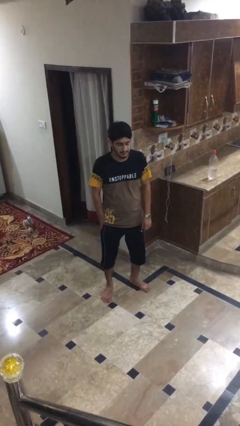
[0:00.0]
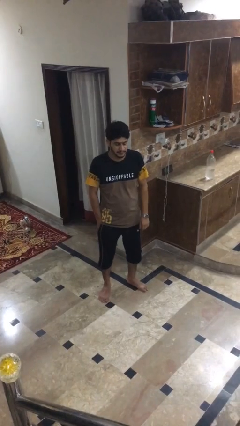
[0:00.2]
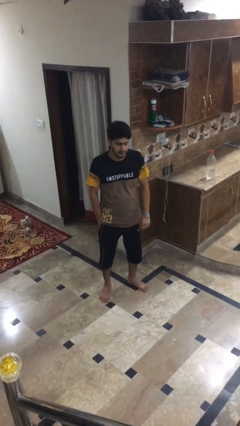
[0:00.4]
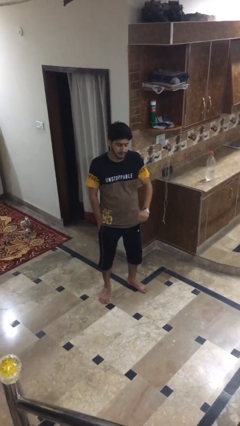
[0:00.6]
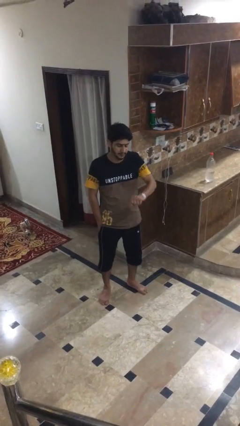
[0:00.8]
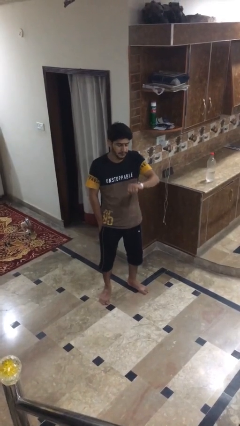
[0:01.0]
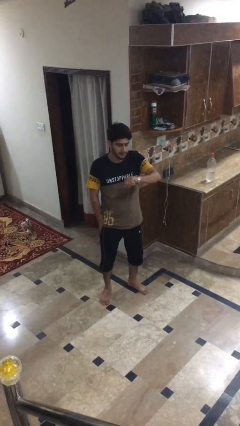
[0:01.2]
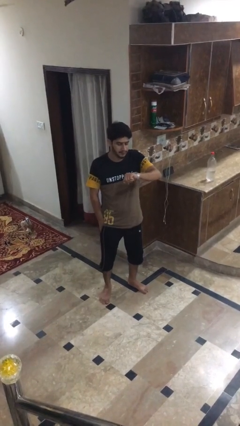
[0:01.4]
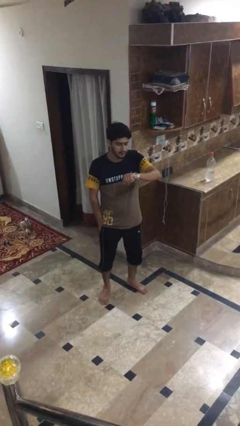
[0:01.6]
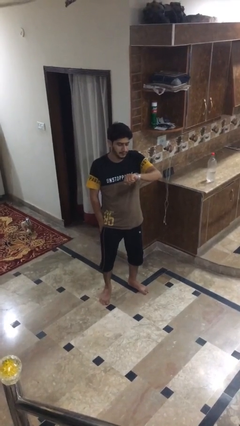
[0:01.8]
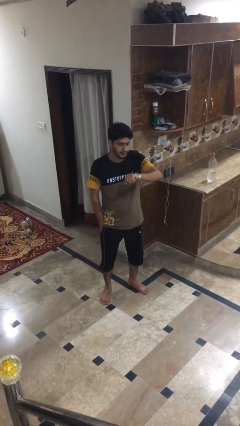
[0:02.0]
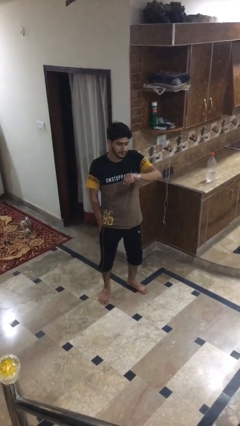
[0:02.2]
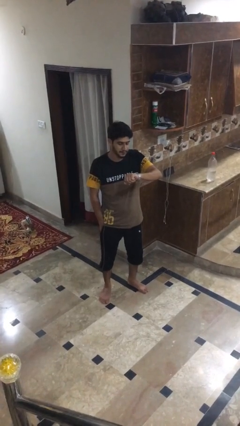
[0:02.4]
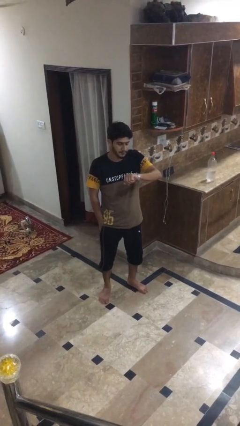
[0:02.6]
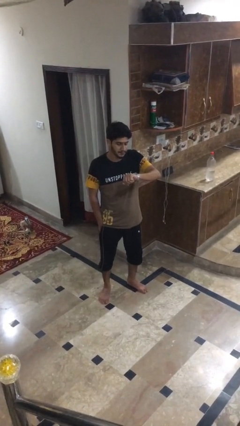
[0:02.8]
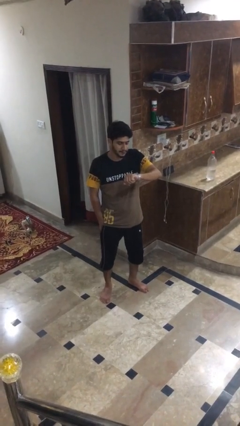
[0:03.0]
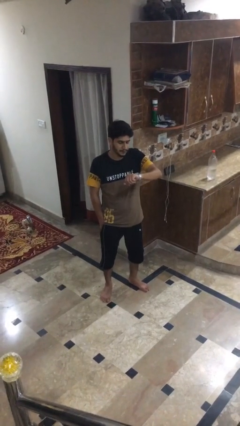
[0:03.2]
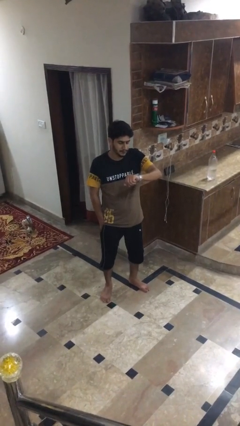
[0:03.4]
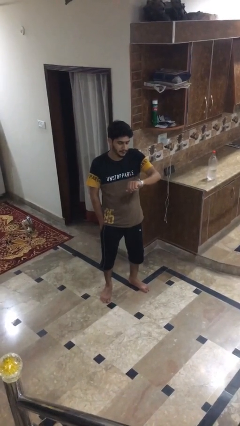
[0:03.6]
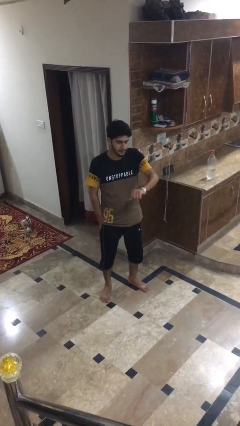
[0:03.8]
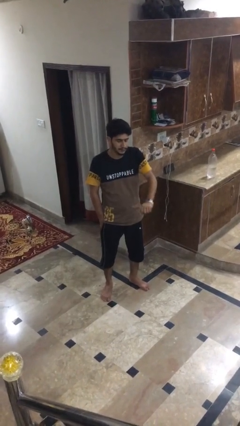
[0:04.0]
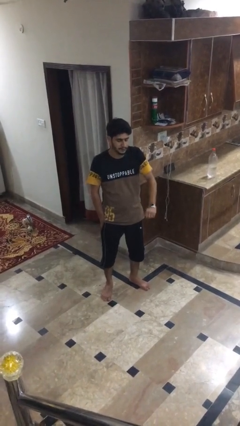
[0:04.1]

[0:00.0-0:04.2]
person looks at wristwatch

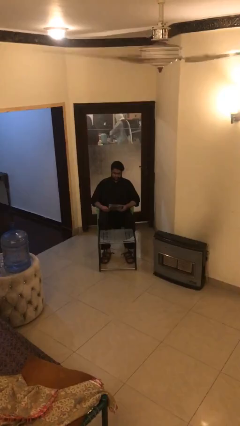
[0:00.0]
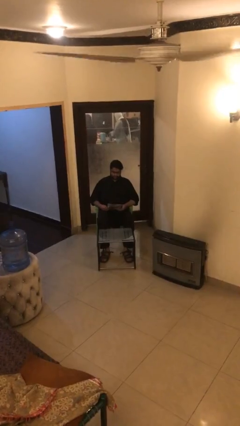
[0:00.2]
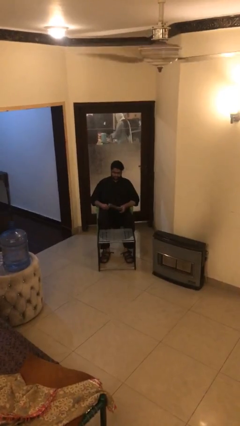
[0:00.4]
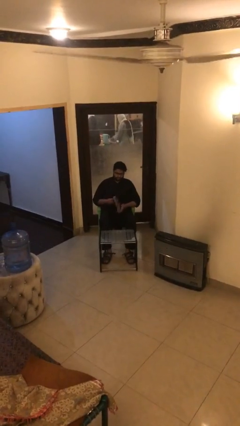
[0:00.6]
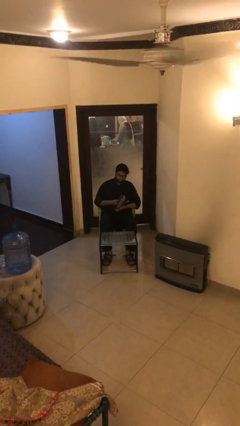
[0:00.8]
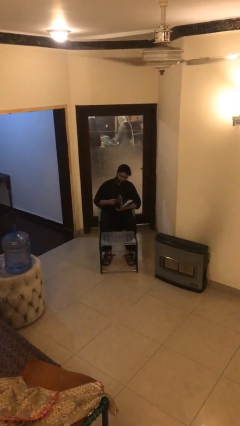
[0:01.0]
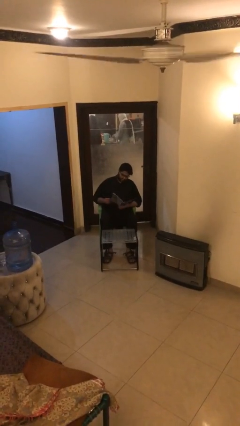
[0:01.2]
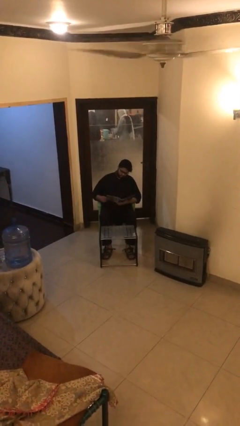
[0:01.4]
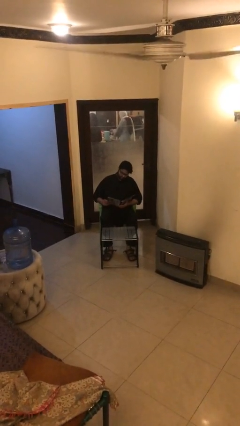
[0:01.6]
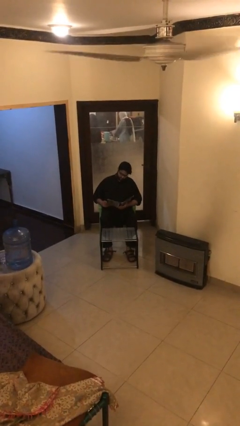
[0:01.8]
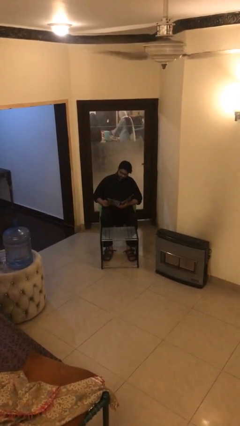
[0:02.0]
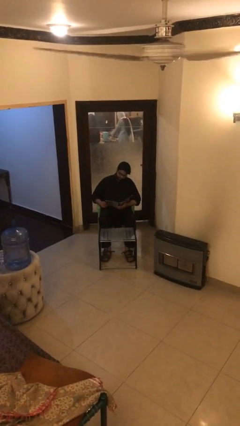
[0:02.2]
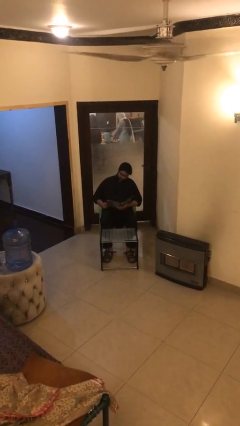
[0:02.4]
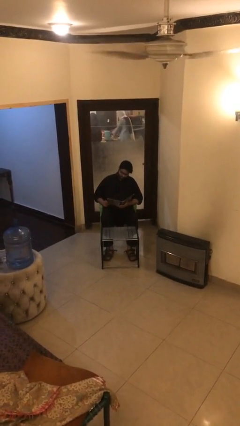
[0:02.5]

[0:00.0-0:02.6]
person reads document

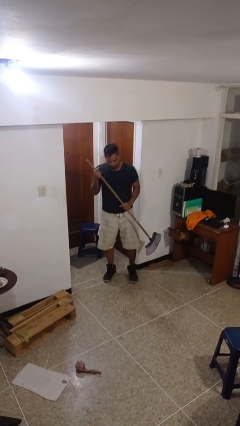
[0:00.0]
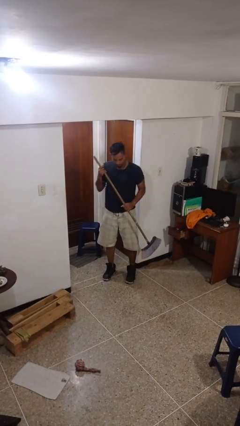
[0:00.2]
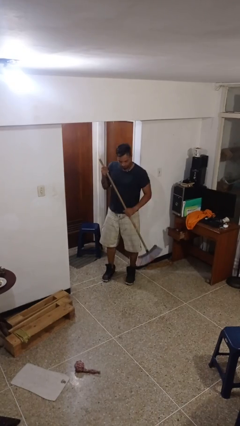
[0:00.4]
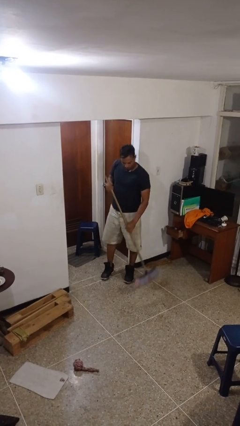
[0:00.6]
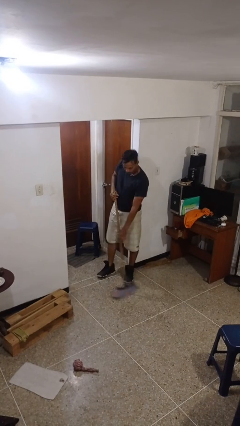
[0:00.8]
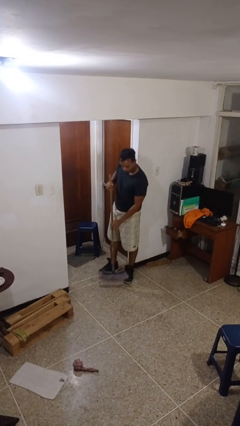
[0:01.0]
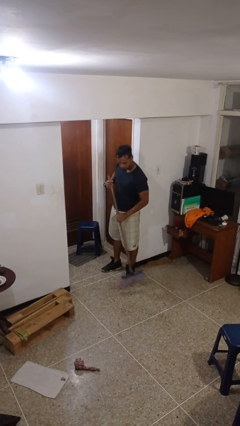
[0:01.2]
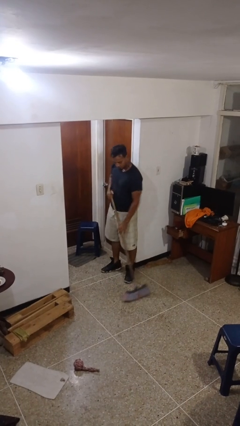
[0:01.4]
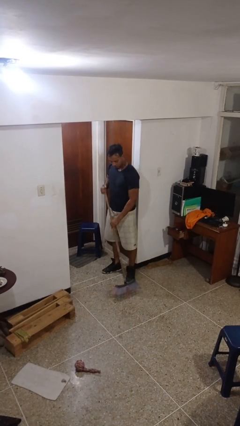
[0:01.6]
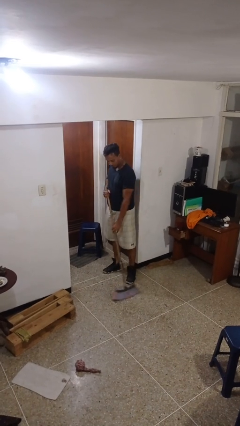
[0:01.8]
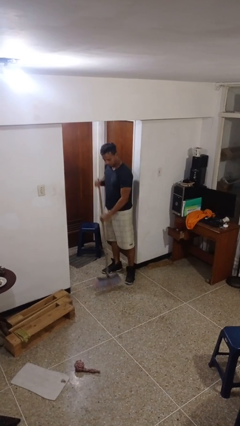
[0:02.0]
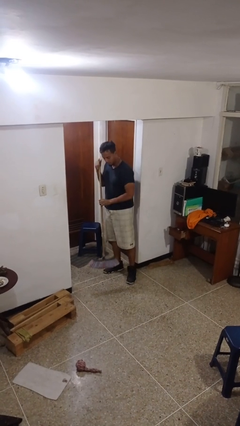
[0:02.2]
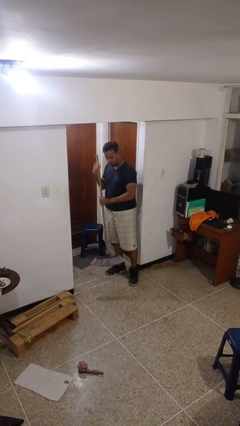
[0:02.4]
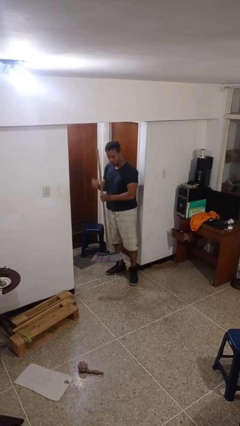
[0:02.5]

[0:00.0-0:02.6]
person sweeps floor

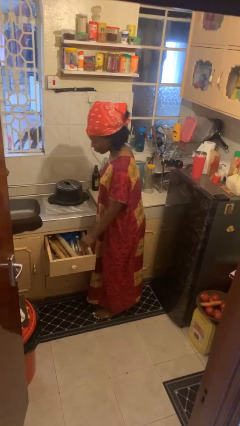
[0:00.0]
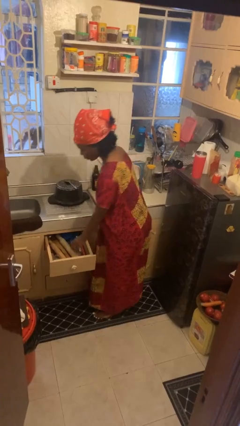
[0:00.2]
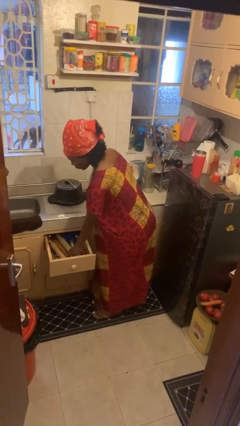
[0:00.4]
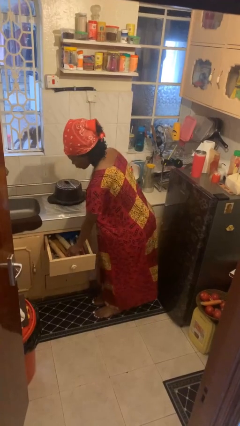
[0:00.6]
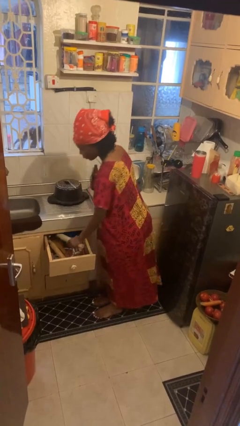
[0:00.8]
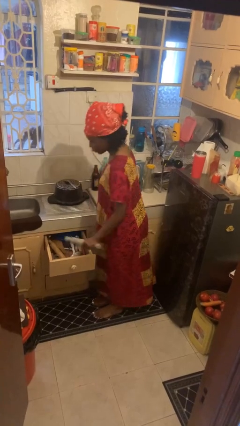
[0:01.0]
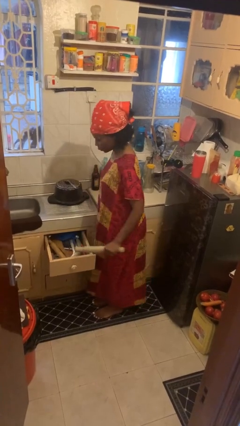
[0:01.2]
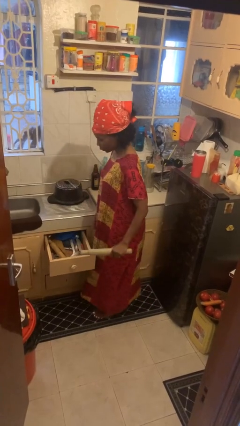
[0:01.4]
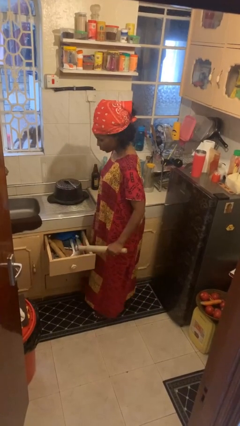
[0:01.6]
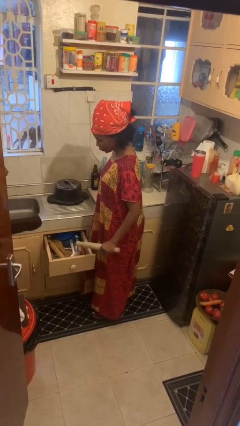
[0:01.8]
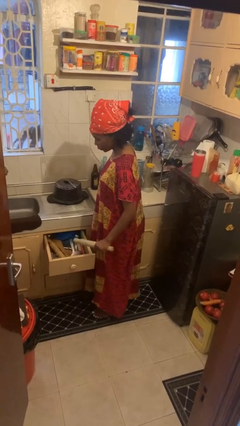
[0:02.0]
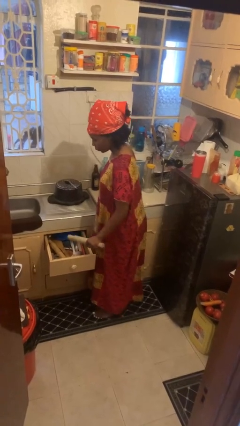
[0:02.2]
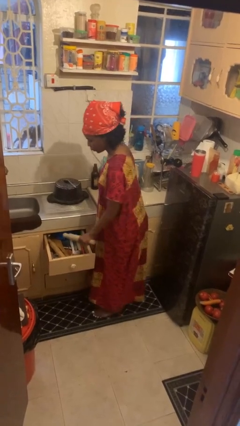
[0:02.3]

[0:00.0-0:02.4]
person takes object from kitchen drawer

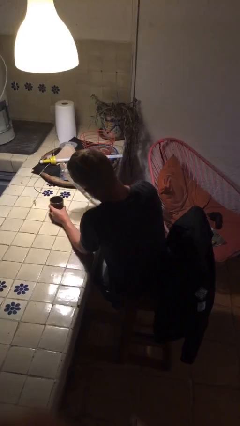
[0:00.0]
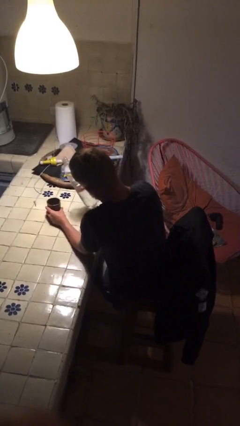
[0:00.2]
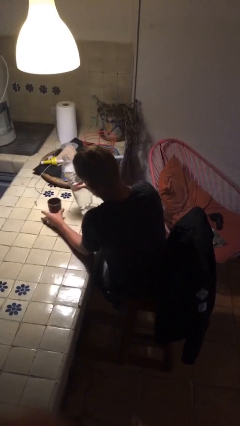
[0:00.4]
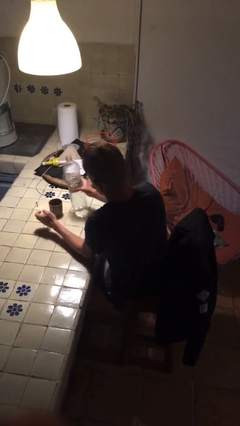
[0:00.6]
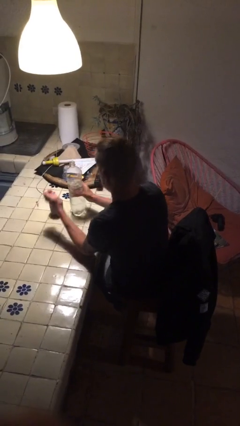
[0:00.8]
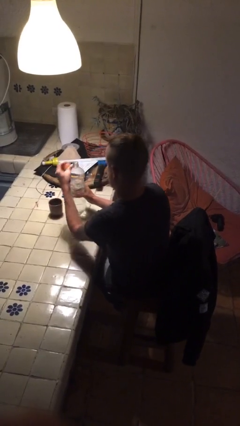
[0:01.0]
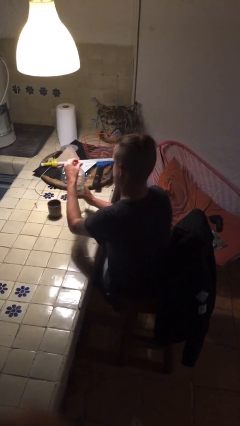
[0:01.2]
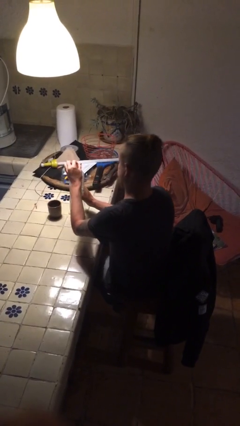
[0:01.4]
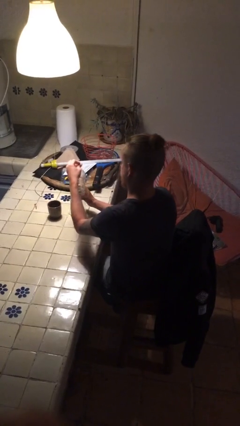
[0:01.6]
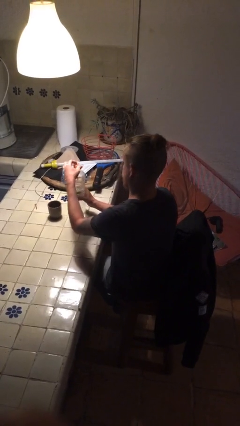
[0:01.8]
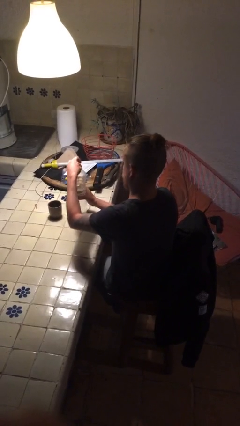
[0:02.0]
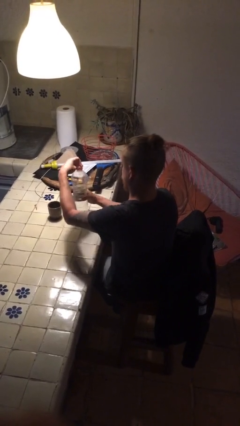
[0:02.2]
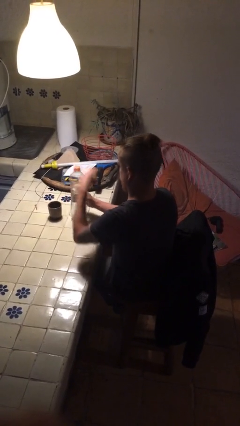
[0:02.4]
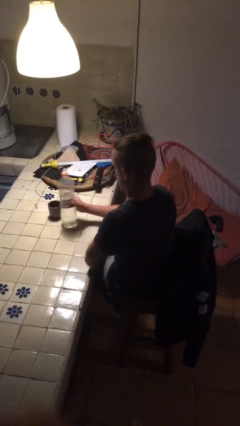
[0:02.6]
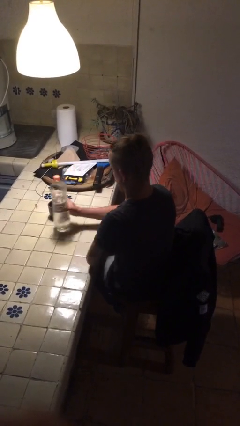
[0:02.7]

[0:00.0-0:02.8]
person screws lid to bottle

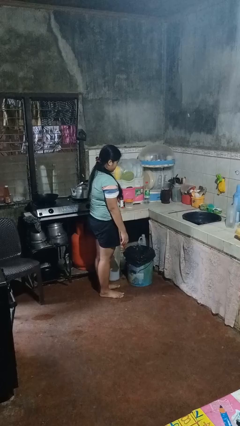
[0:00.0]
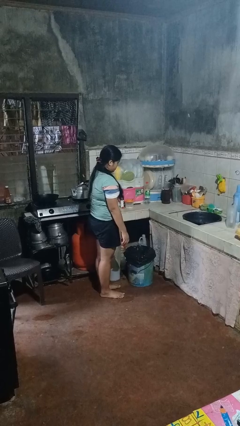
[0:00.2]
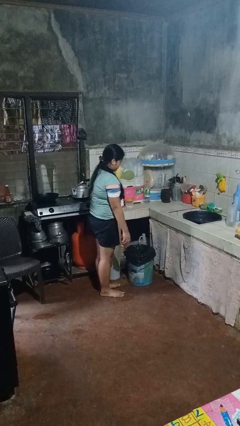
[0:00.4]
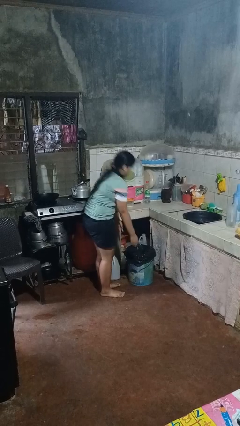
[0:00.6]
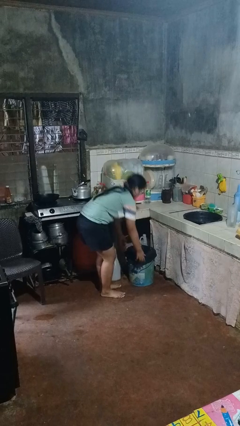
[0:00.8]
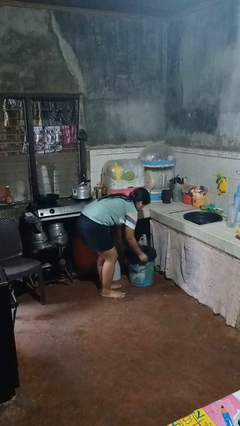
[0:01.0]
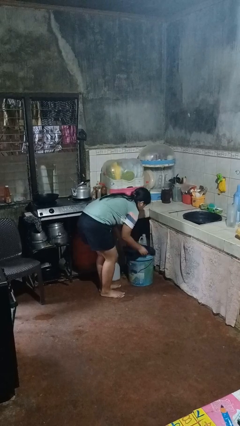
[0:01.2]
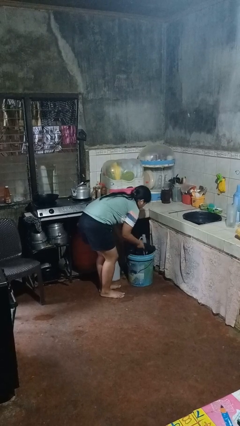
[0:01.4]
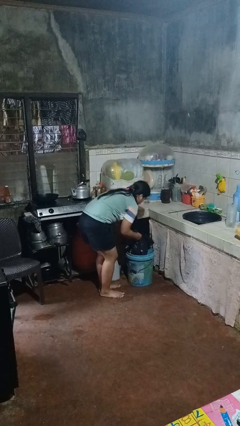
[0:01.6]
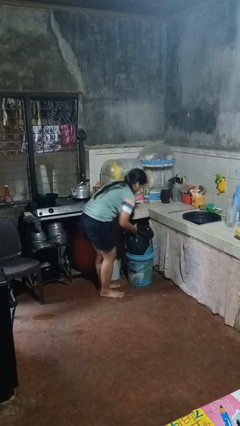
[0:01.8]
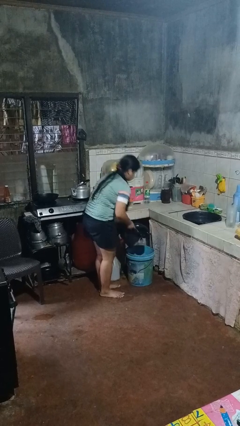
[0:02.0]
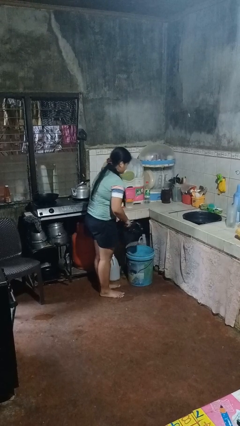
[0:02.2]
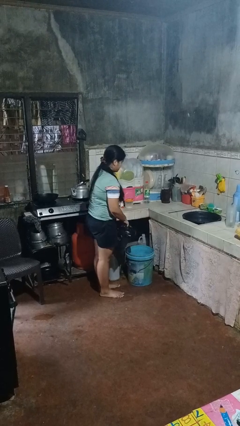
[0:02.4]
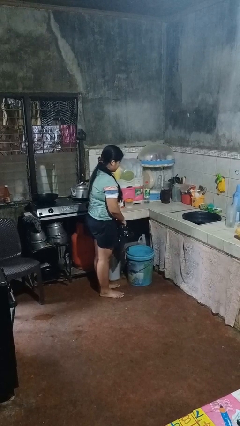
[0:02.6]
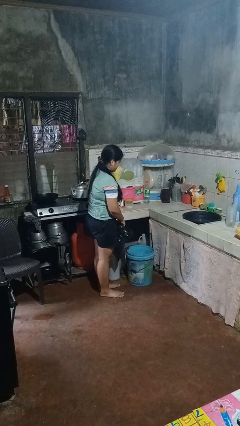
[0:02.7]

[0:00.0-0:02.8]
person removes trashbag from trashcan
